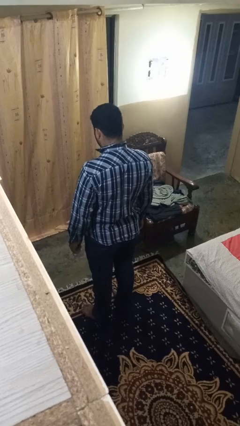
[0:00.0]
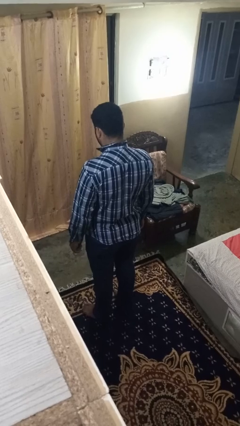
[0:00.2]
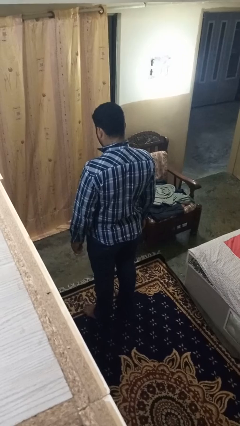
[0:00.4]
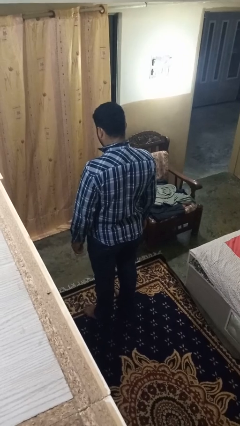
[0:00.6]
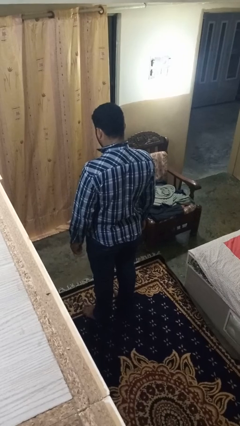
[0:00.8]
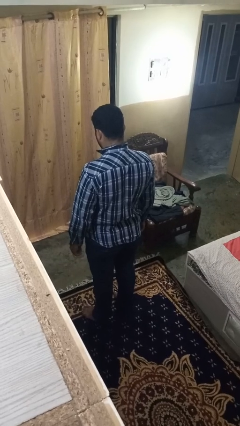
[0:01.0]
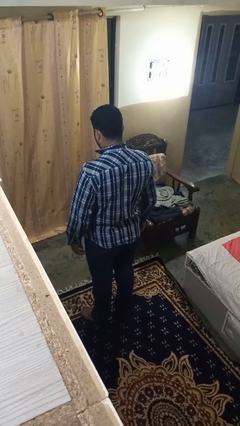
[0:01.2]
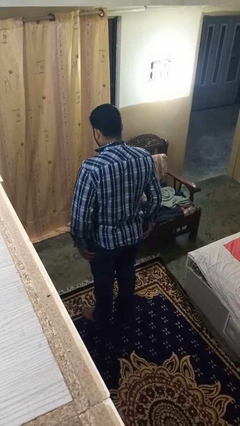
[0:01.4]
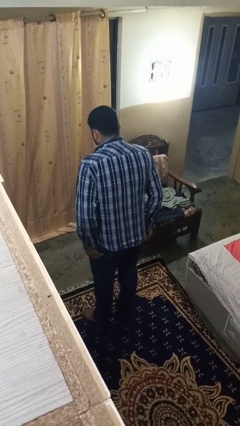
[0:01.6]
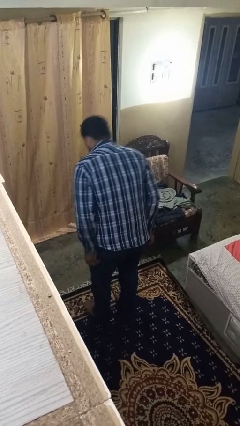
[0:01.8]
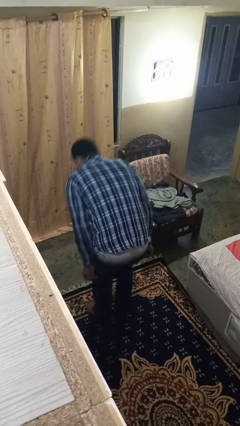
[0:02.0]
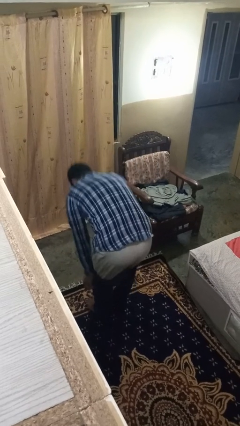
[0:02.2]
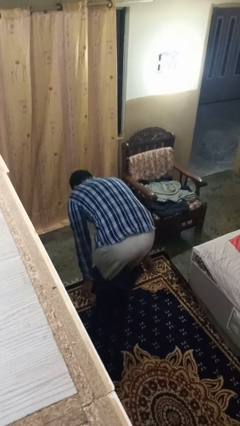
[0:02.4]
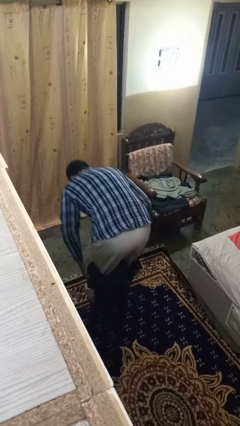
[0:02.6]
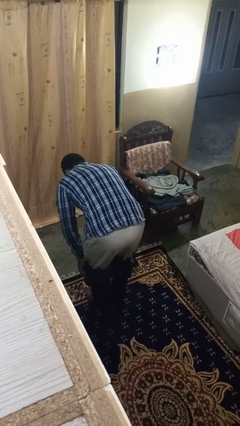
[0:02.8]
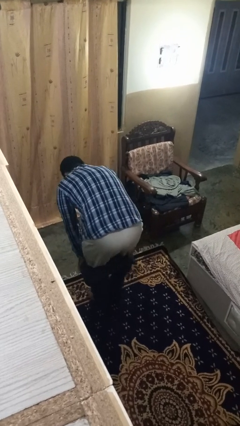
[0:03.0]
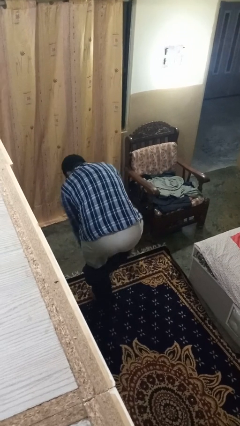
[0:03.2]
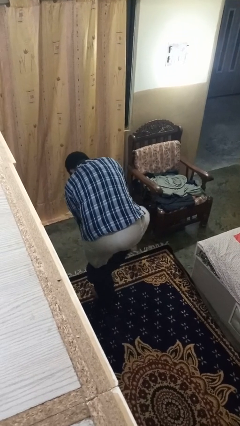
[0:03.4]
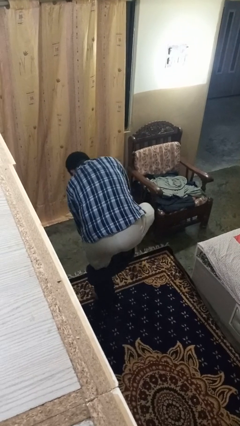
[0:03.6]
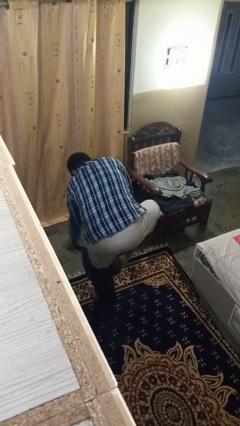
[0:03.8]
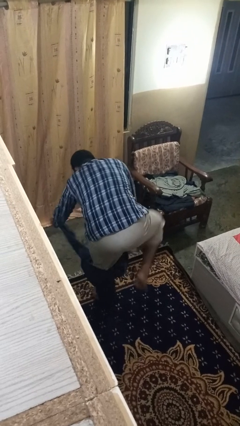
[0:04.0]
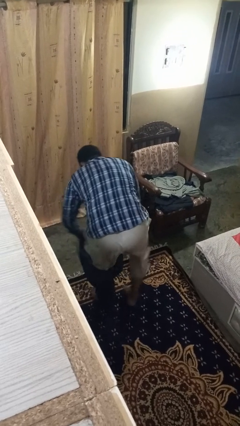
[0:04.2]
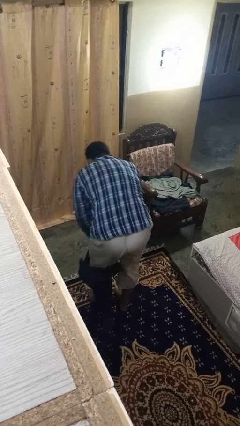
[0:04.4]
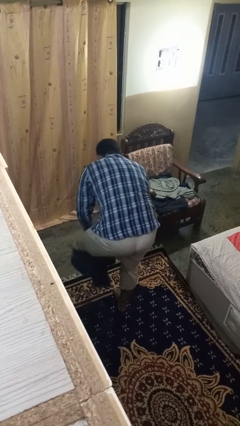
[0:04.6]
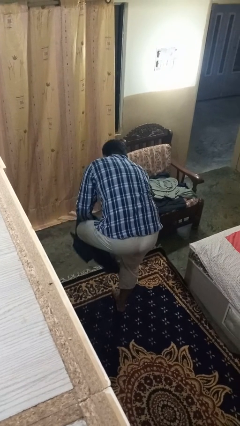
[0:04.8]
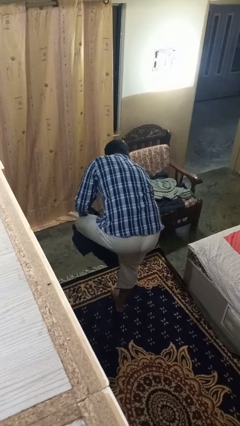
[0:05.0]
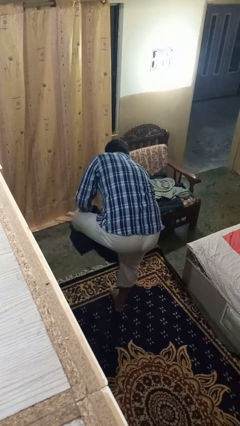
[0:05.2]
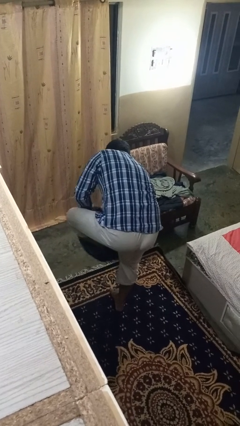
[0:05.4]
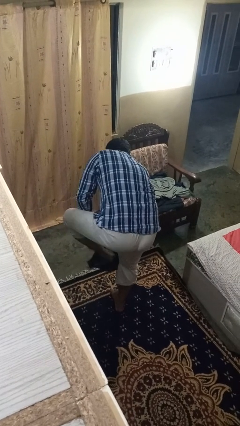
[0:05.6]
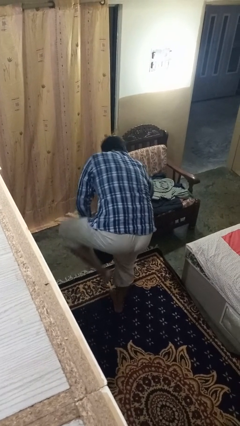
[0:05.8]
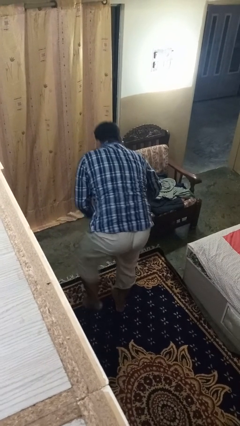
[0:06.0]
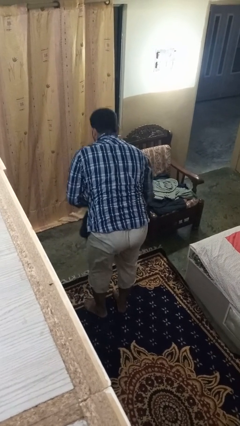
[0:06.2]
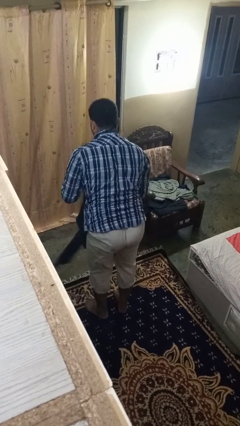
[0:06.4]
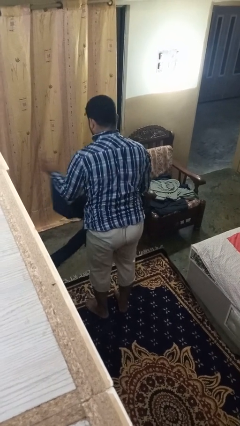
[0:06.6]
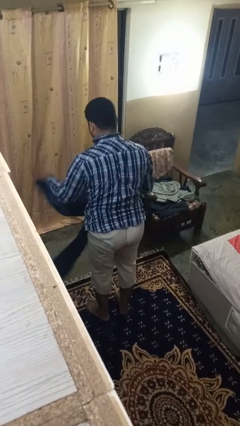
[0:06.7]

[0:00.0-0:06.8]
person takes off pants

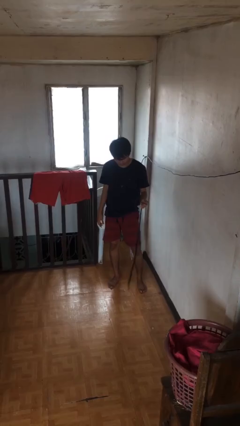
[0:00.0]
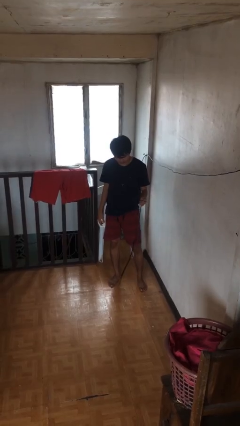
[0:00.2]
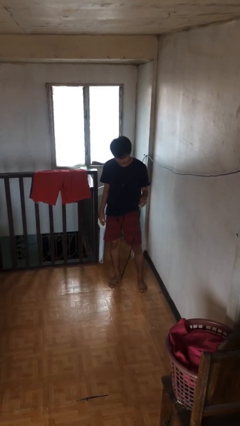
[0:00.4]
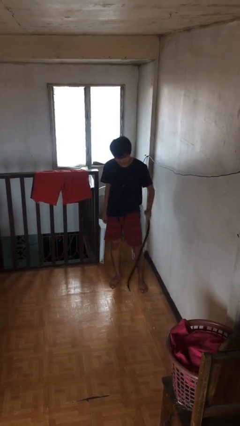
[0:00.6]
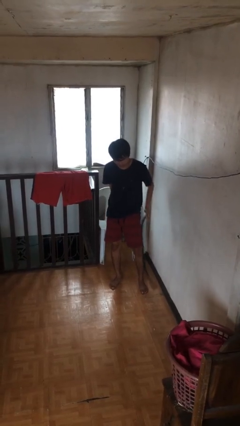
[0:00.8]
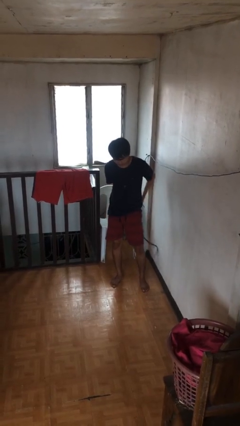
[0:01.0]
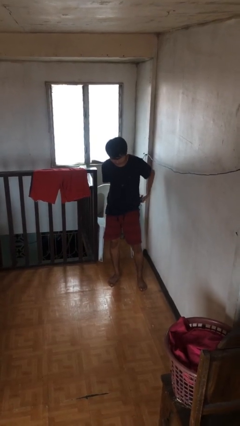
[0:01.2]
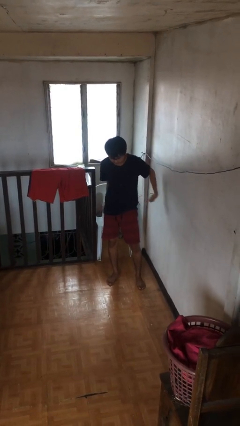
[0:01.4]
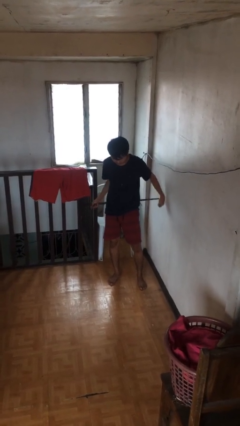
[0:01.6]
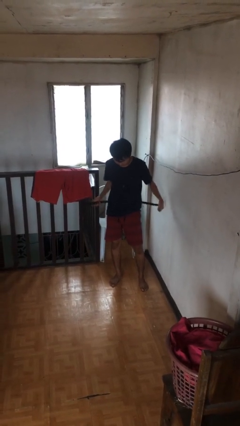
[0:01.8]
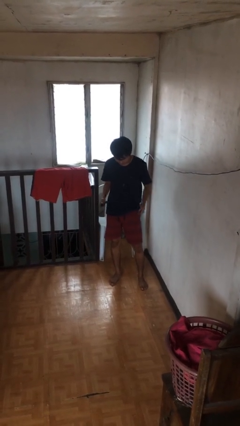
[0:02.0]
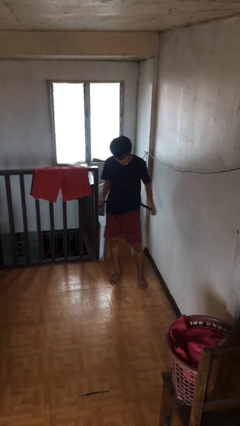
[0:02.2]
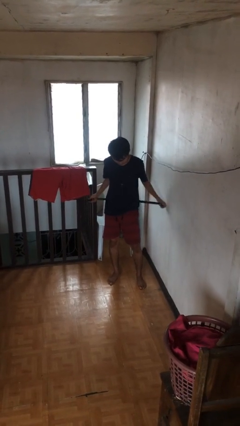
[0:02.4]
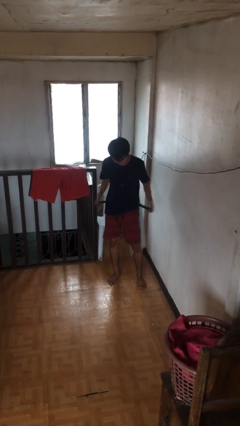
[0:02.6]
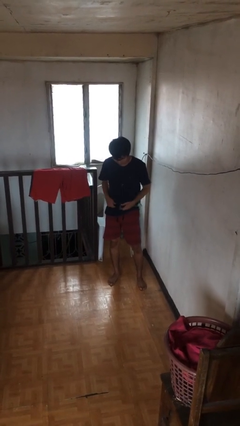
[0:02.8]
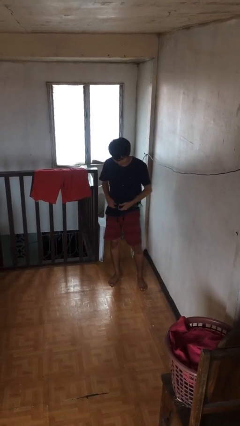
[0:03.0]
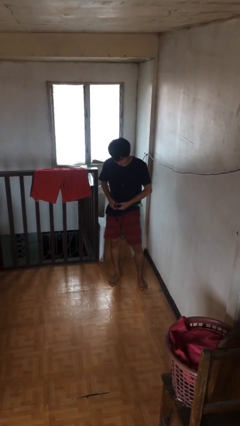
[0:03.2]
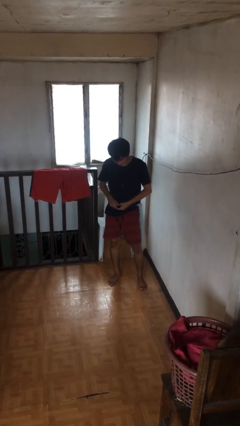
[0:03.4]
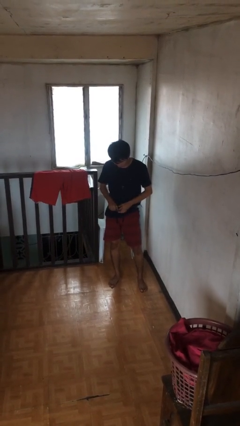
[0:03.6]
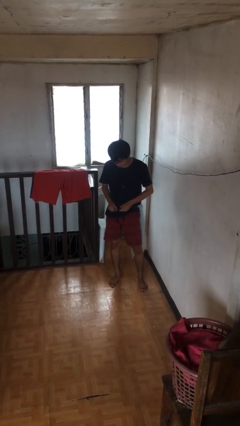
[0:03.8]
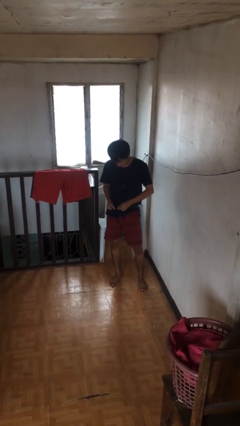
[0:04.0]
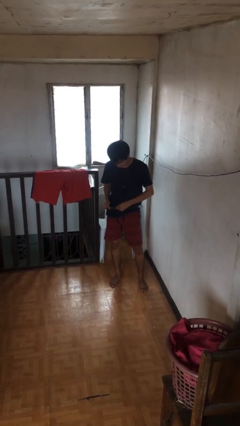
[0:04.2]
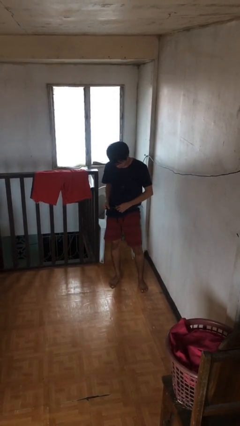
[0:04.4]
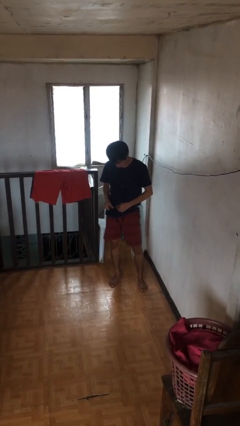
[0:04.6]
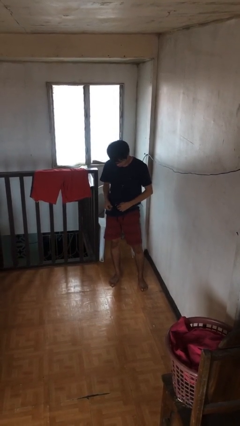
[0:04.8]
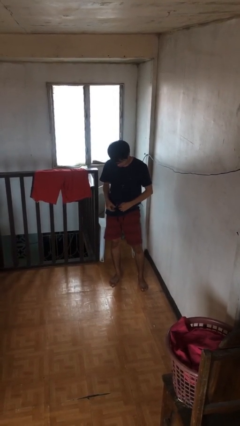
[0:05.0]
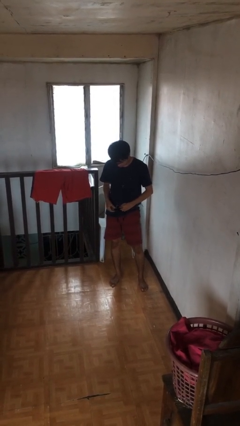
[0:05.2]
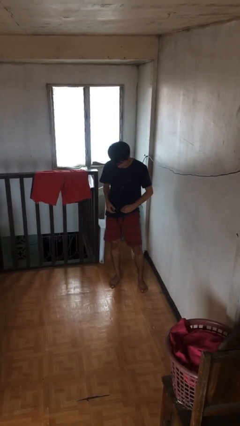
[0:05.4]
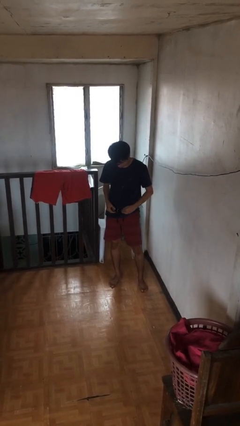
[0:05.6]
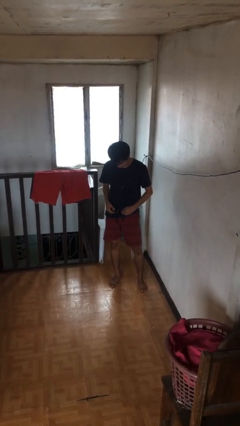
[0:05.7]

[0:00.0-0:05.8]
person puts on belt

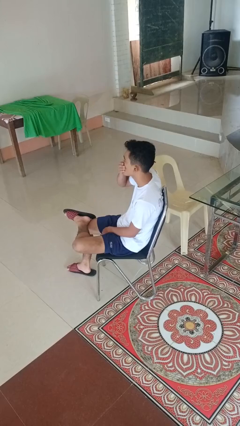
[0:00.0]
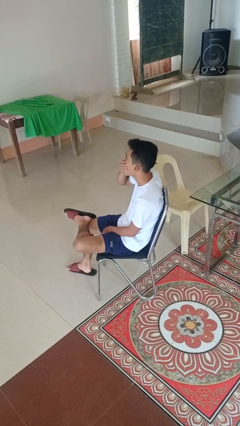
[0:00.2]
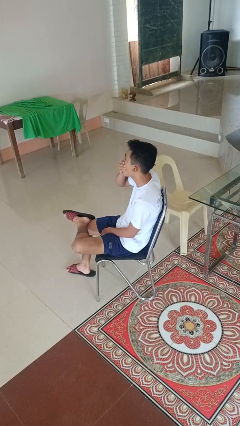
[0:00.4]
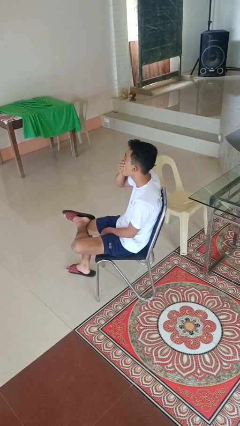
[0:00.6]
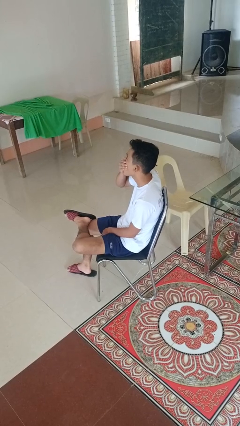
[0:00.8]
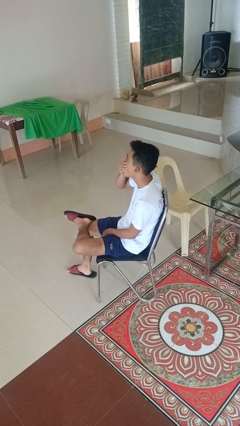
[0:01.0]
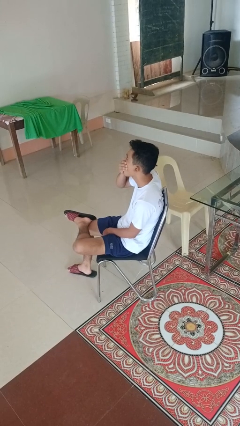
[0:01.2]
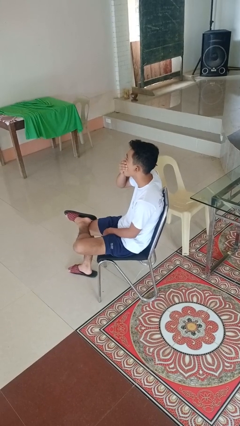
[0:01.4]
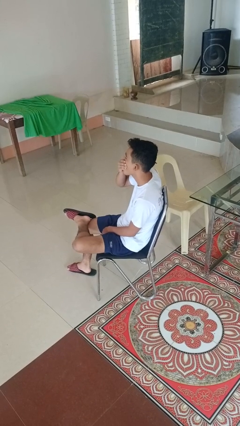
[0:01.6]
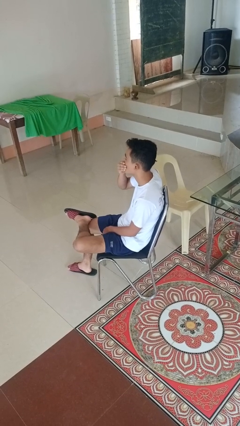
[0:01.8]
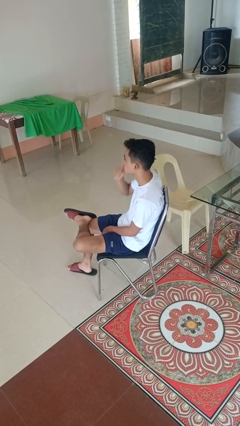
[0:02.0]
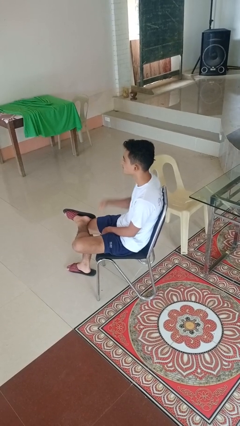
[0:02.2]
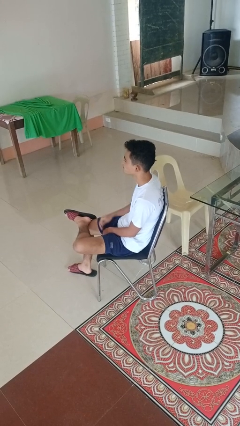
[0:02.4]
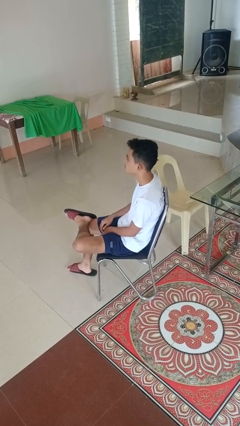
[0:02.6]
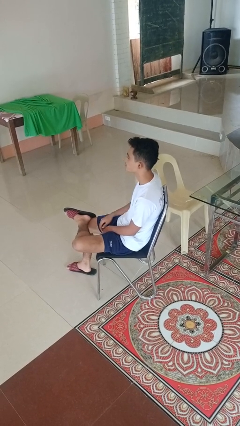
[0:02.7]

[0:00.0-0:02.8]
person yawns

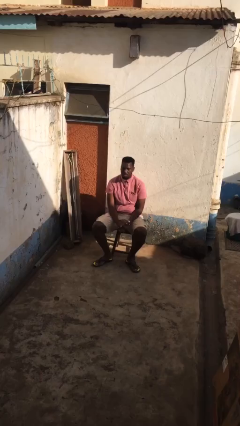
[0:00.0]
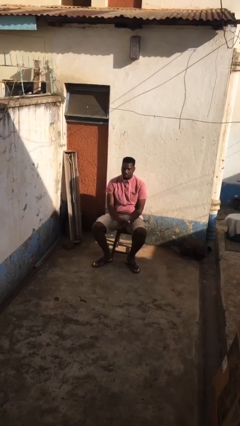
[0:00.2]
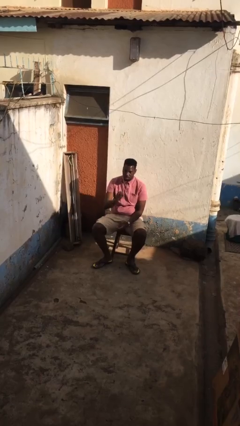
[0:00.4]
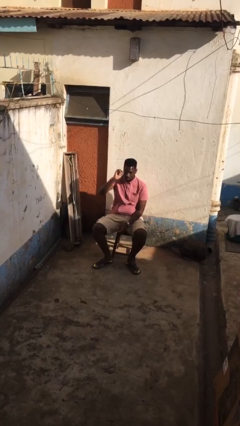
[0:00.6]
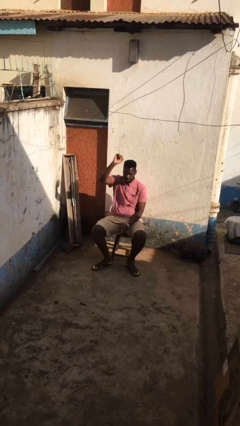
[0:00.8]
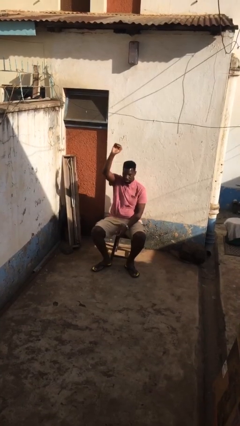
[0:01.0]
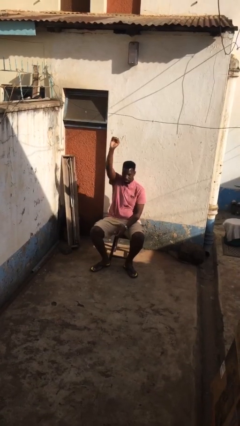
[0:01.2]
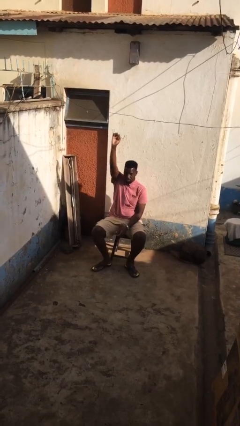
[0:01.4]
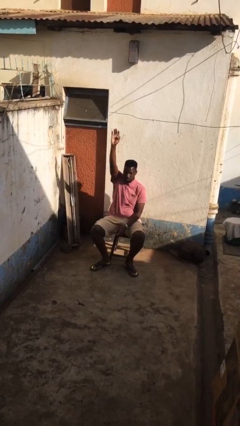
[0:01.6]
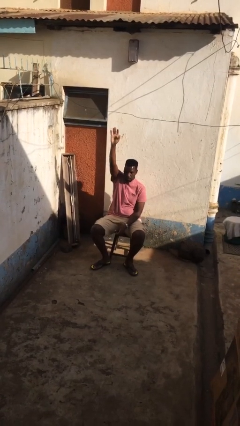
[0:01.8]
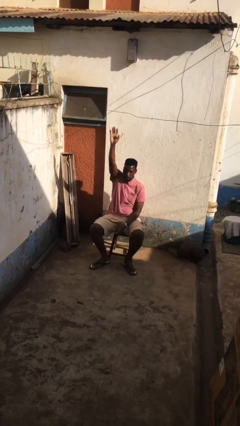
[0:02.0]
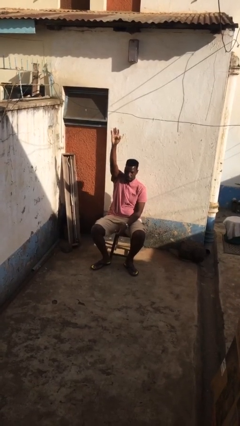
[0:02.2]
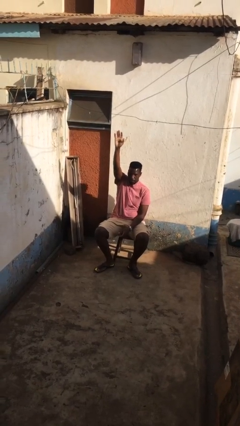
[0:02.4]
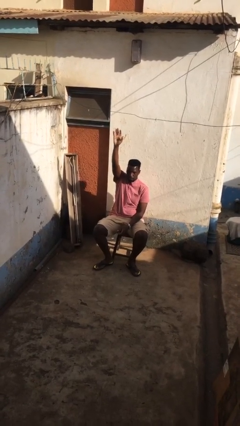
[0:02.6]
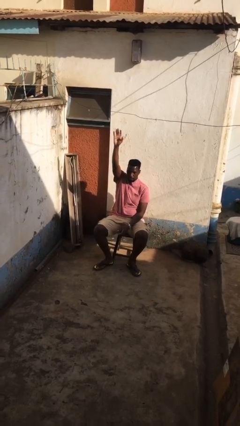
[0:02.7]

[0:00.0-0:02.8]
person gestures raise hand
